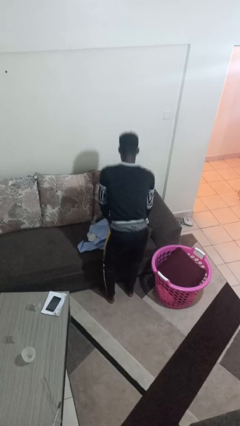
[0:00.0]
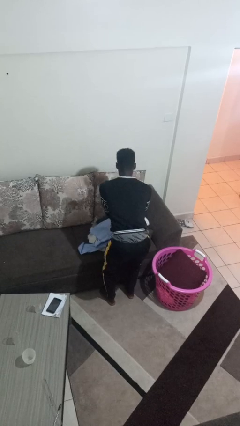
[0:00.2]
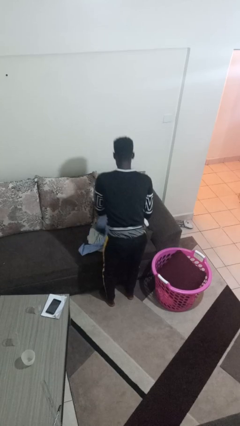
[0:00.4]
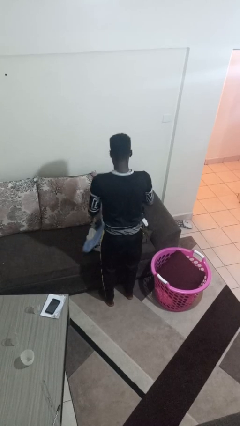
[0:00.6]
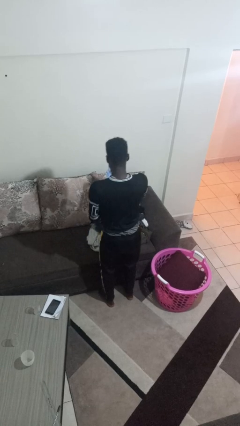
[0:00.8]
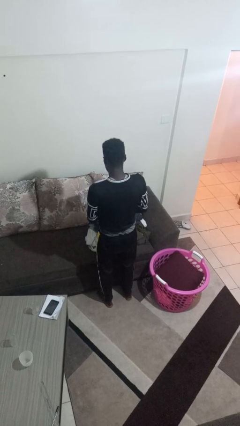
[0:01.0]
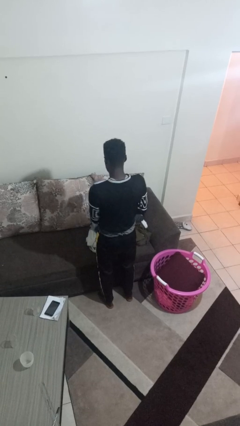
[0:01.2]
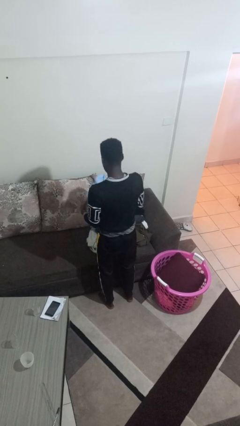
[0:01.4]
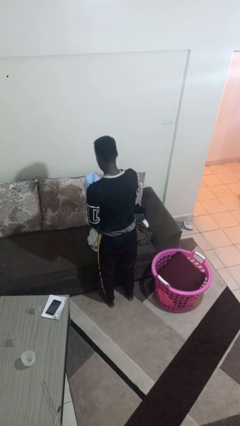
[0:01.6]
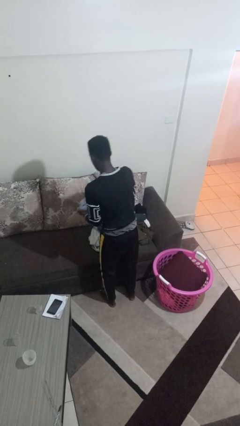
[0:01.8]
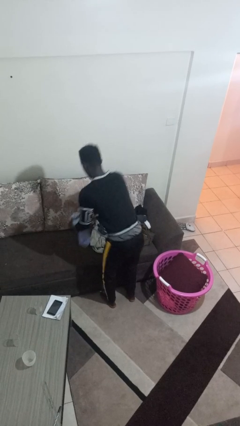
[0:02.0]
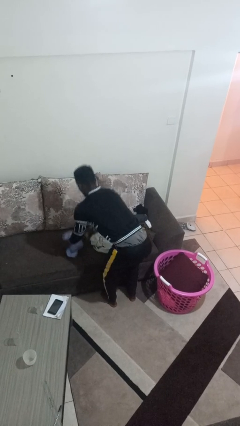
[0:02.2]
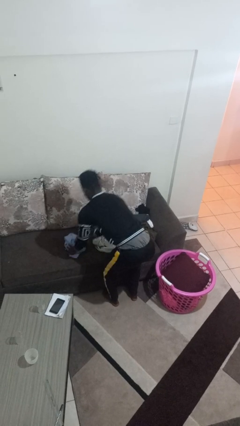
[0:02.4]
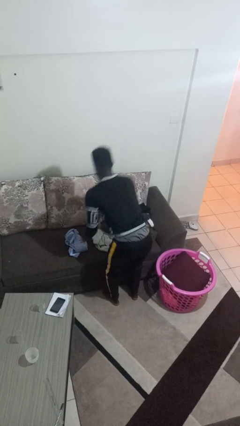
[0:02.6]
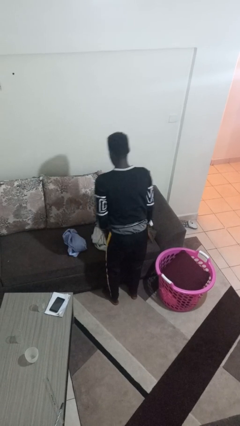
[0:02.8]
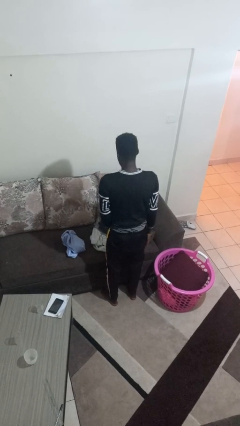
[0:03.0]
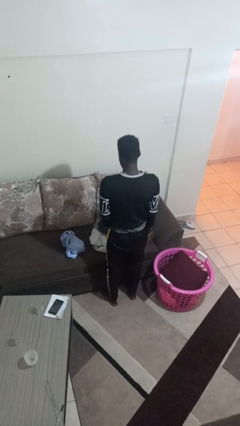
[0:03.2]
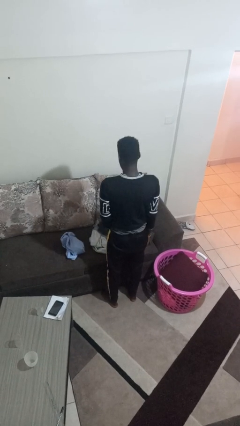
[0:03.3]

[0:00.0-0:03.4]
person folds shirt

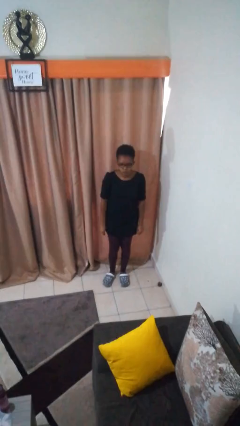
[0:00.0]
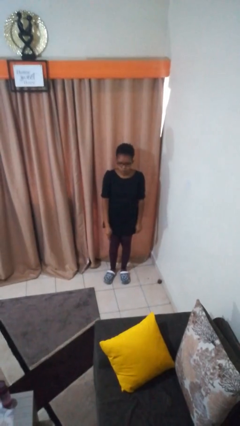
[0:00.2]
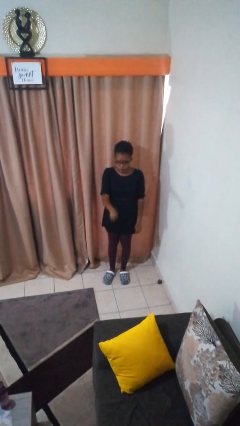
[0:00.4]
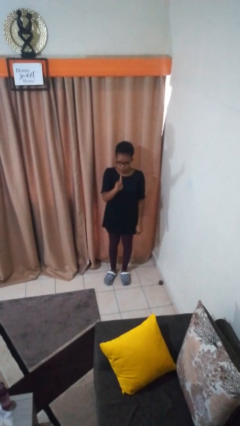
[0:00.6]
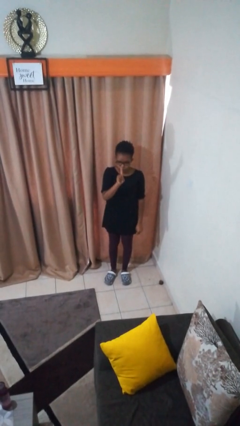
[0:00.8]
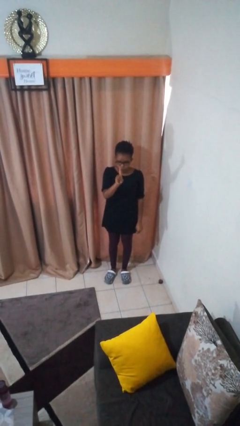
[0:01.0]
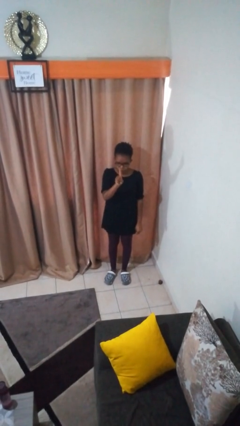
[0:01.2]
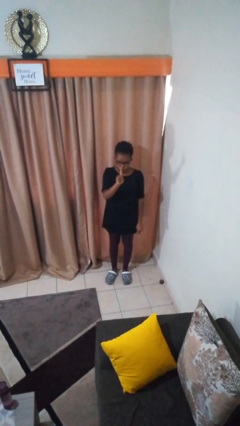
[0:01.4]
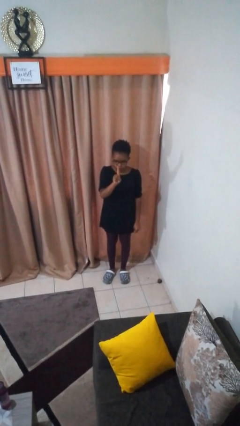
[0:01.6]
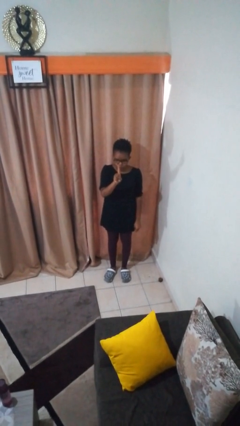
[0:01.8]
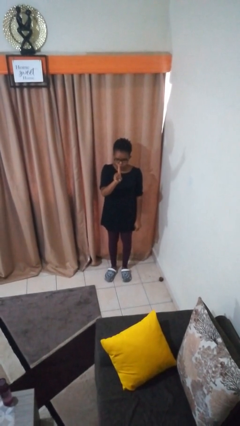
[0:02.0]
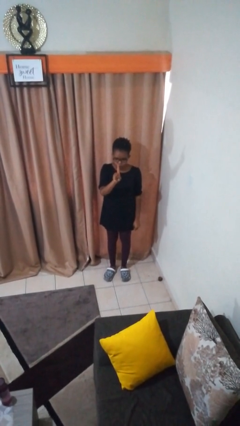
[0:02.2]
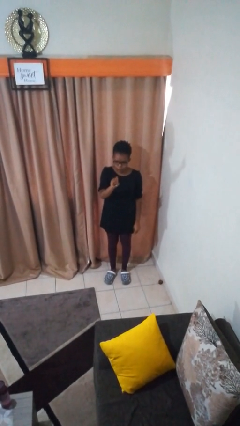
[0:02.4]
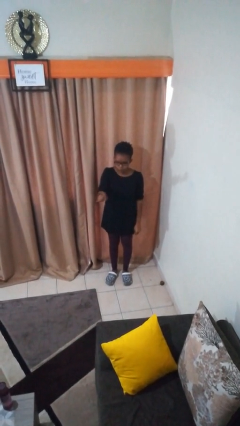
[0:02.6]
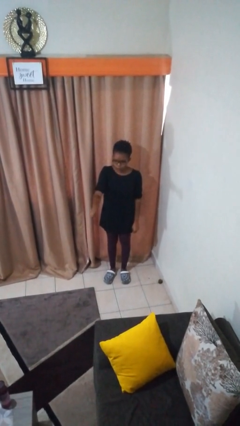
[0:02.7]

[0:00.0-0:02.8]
person gestures number one

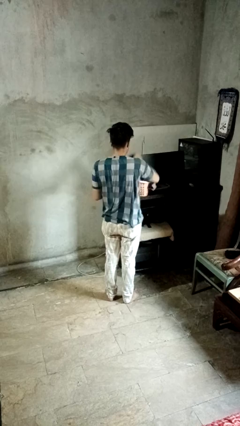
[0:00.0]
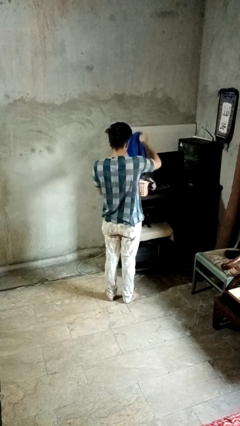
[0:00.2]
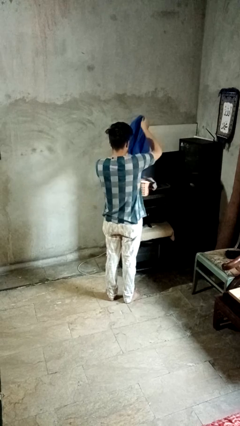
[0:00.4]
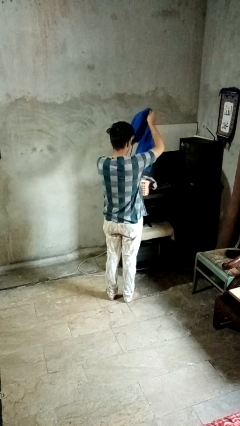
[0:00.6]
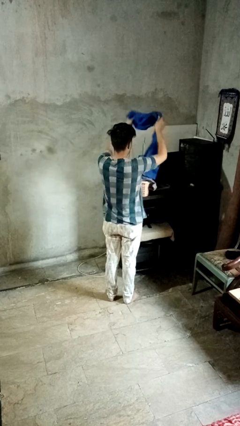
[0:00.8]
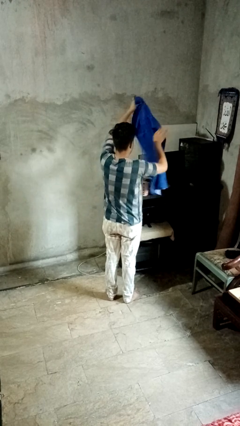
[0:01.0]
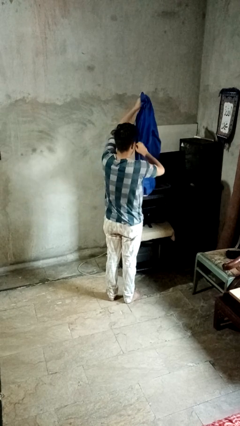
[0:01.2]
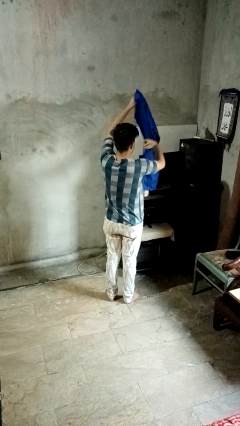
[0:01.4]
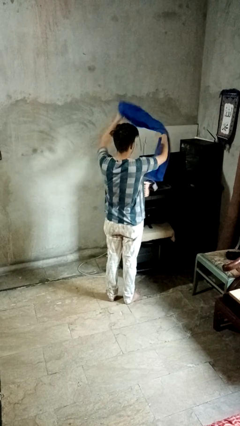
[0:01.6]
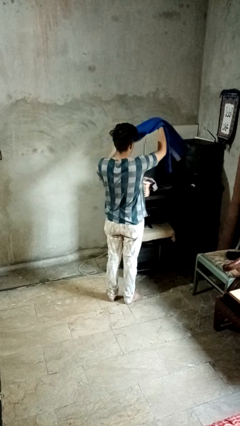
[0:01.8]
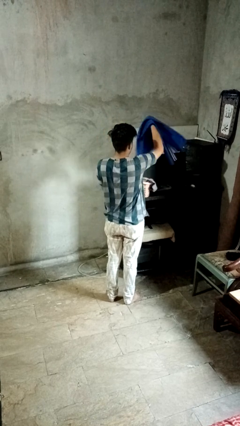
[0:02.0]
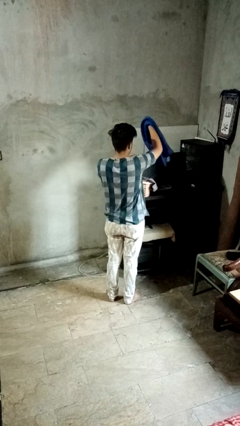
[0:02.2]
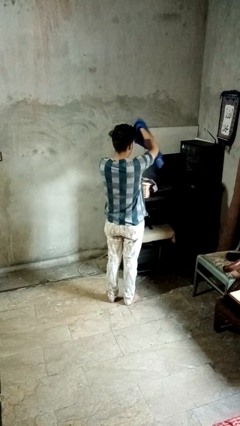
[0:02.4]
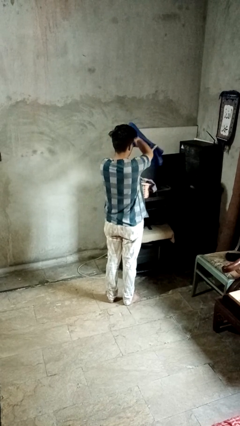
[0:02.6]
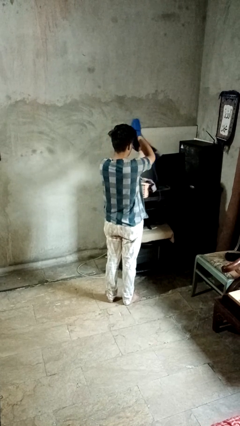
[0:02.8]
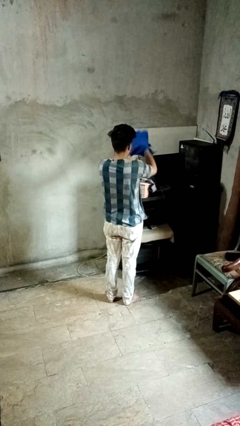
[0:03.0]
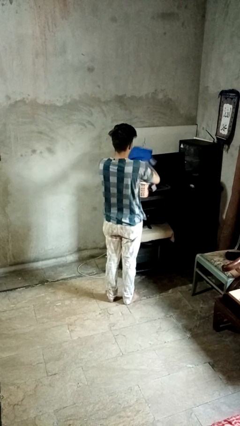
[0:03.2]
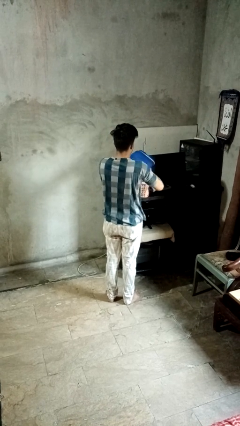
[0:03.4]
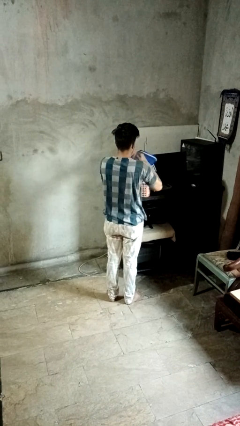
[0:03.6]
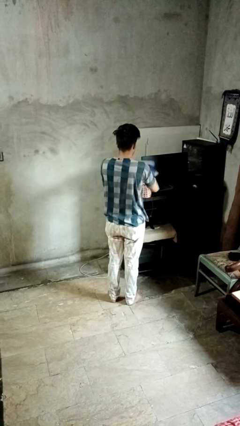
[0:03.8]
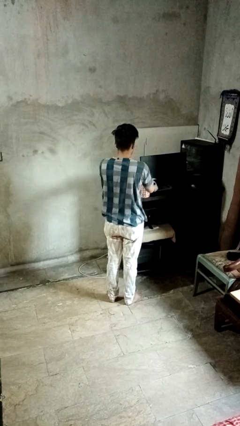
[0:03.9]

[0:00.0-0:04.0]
person folds pants

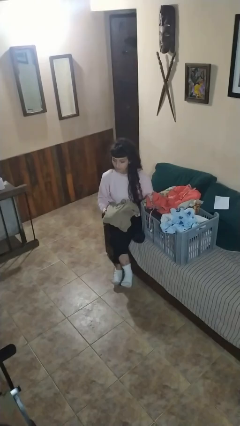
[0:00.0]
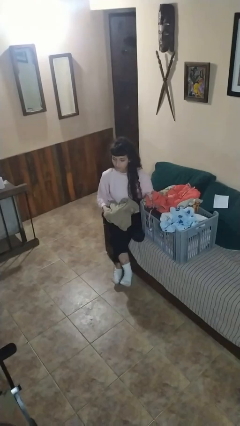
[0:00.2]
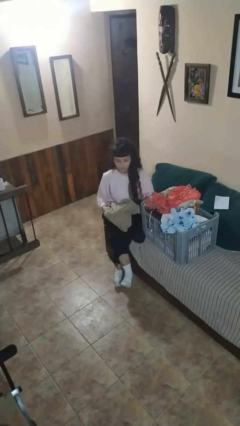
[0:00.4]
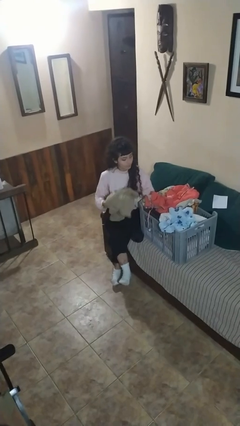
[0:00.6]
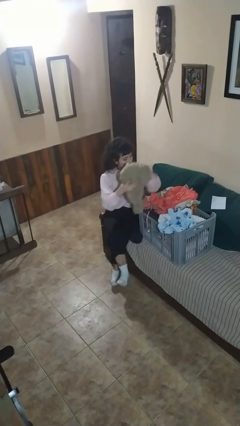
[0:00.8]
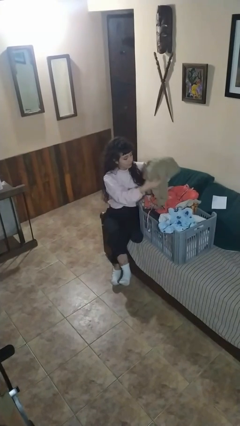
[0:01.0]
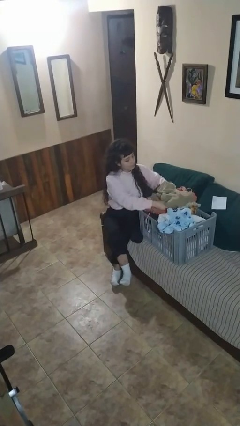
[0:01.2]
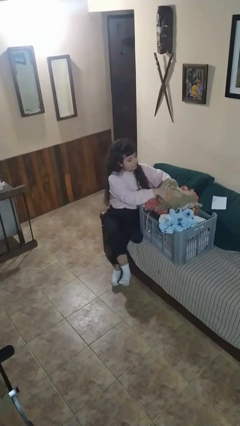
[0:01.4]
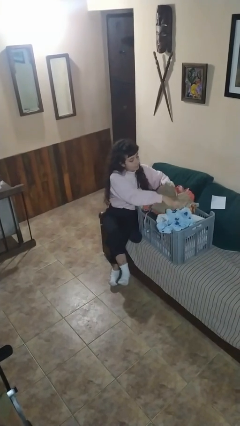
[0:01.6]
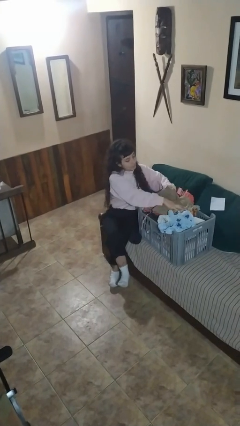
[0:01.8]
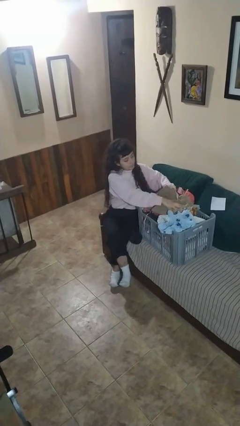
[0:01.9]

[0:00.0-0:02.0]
person puts object into basket

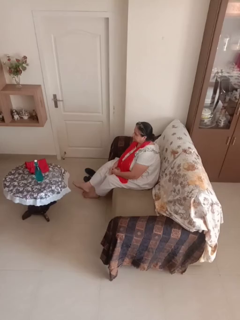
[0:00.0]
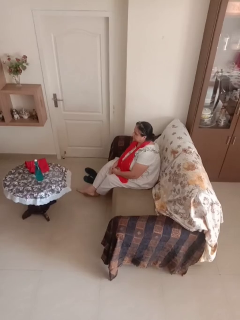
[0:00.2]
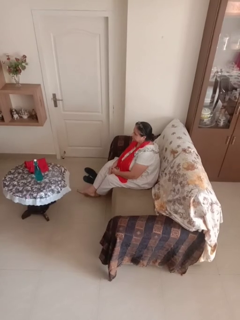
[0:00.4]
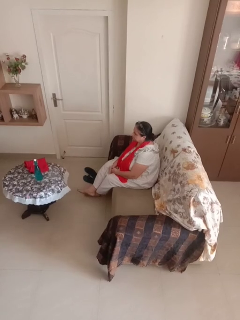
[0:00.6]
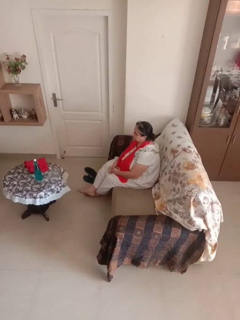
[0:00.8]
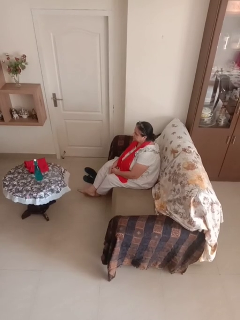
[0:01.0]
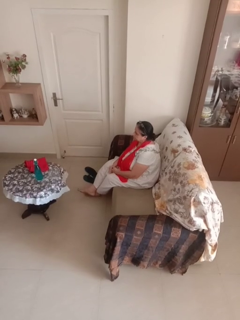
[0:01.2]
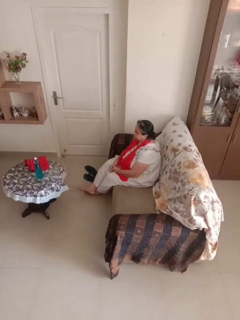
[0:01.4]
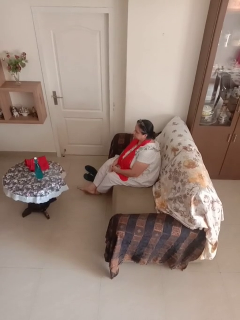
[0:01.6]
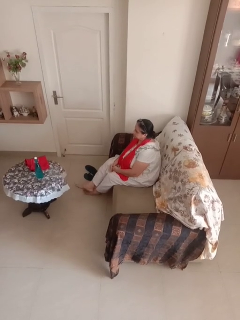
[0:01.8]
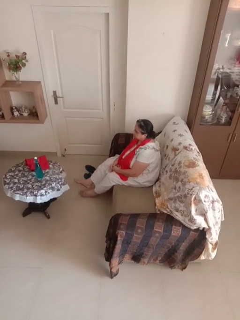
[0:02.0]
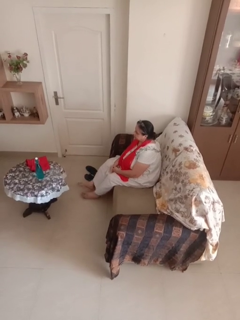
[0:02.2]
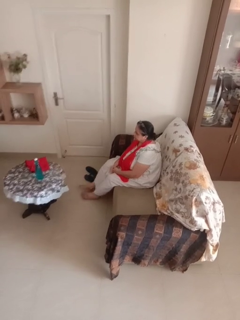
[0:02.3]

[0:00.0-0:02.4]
person crosses legs

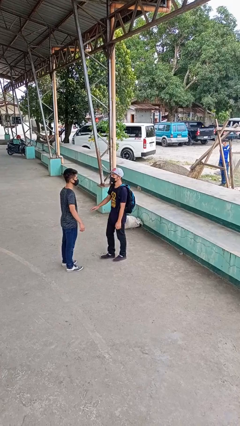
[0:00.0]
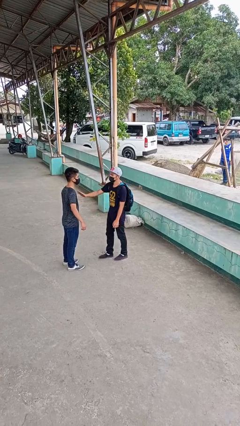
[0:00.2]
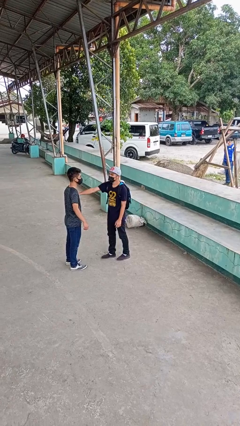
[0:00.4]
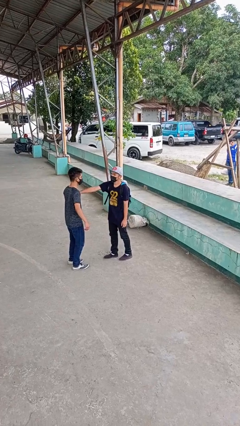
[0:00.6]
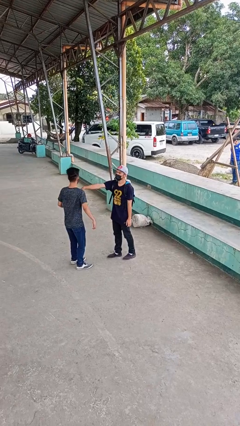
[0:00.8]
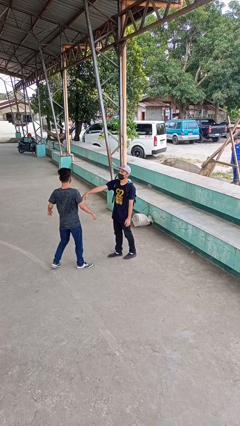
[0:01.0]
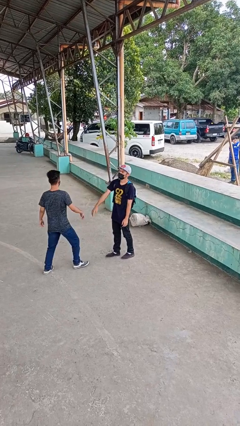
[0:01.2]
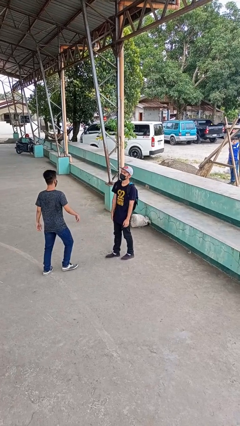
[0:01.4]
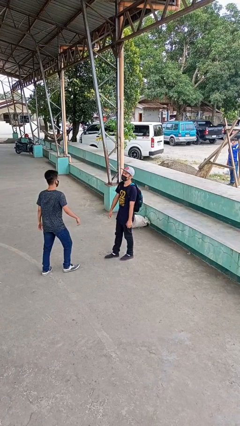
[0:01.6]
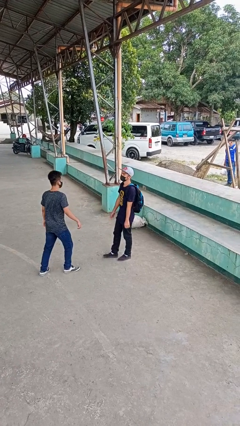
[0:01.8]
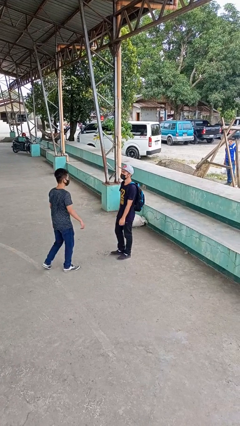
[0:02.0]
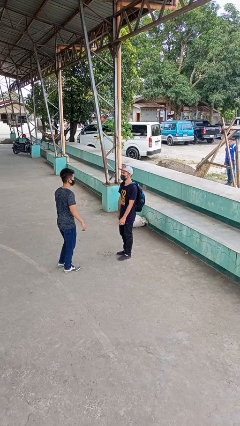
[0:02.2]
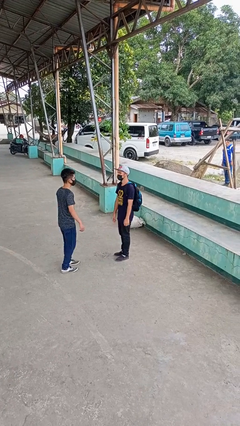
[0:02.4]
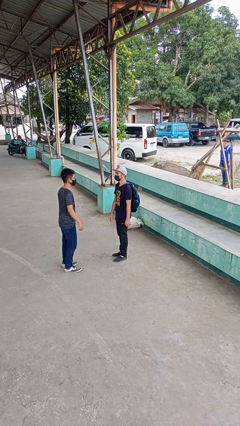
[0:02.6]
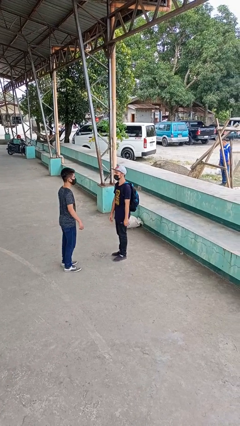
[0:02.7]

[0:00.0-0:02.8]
person shoves person

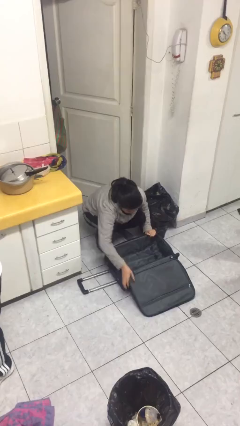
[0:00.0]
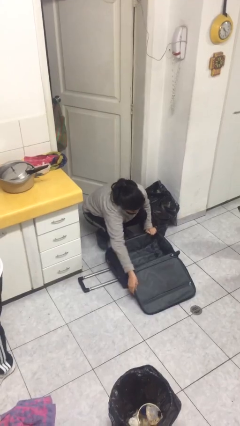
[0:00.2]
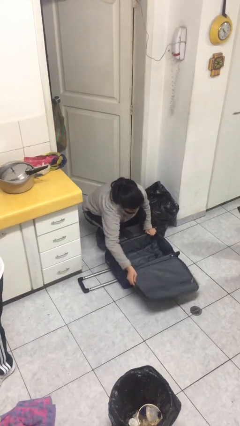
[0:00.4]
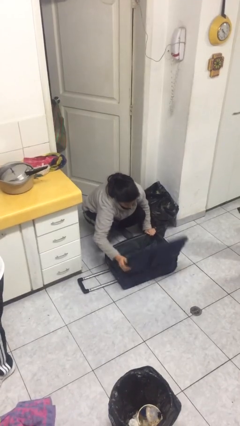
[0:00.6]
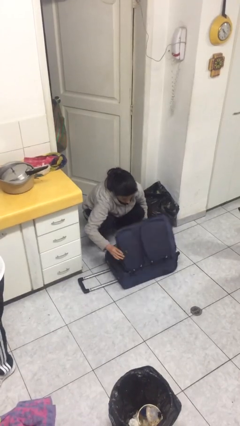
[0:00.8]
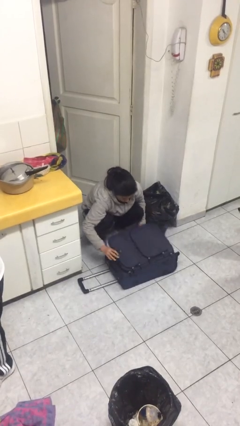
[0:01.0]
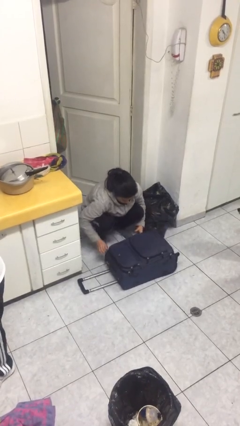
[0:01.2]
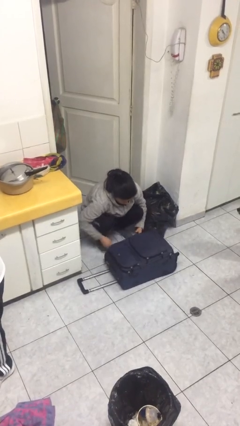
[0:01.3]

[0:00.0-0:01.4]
person closes suitcase
